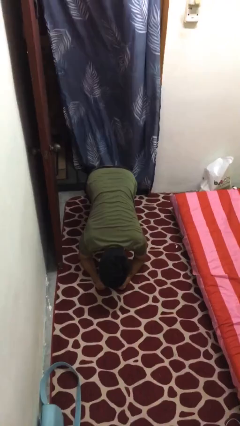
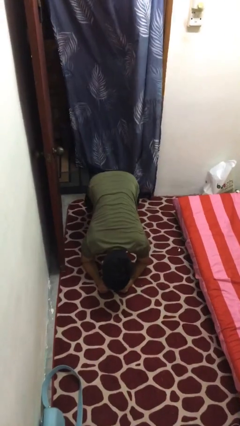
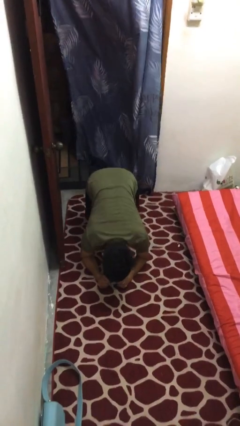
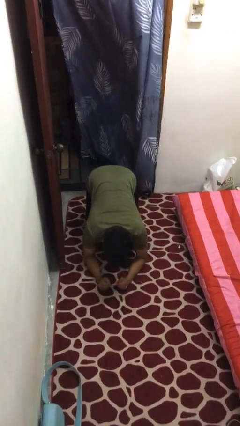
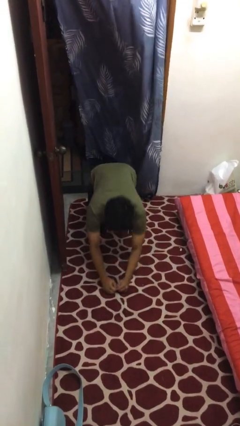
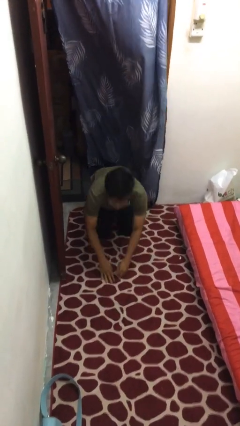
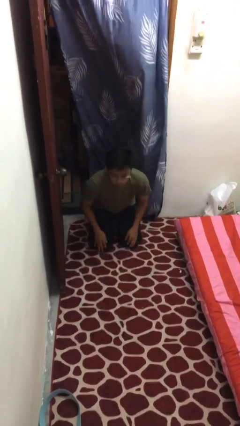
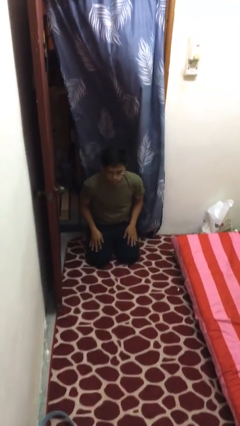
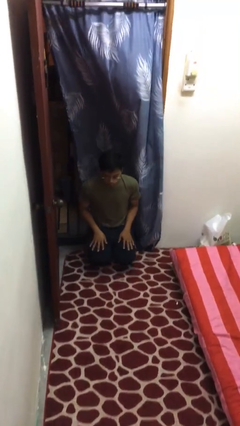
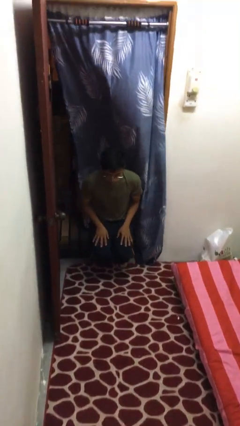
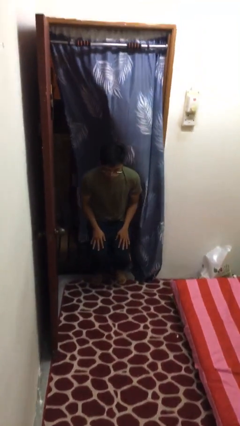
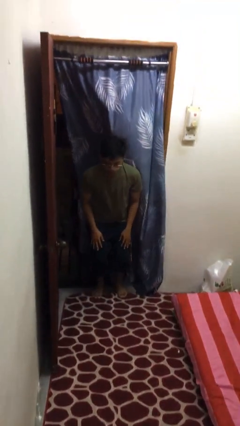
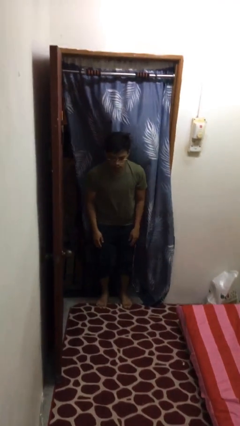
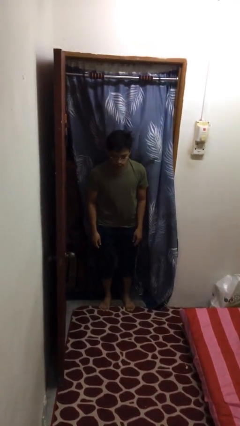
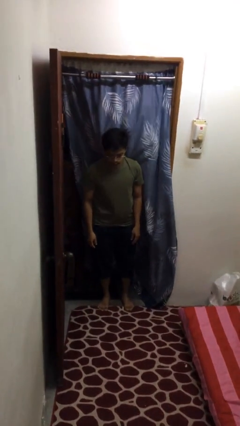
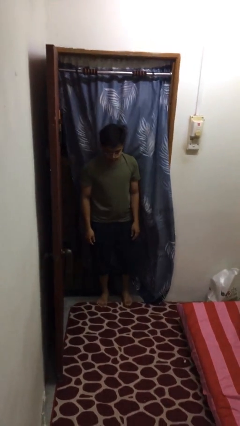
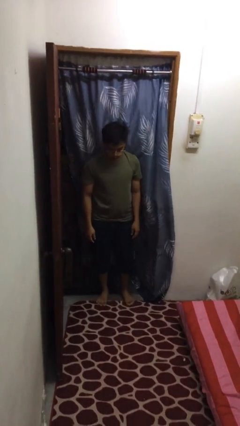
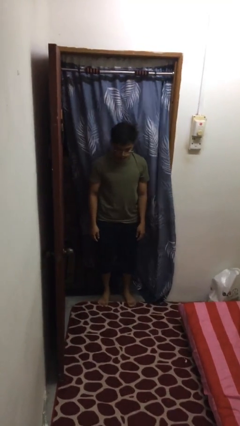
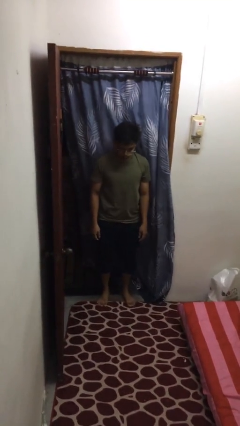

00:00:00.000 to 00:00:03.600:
person stands up from floor

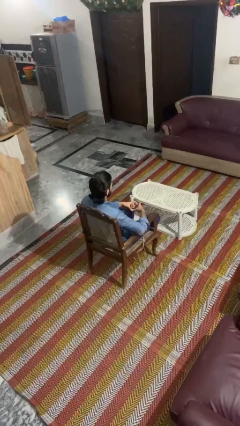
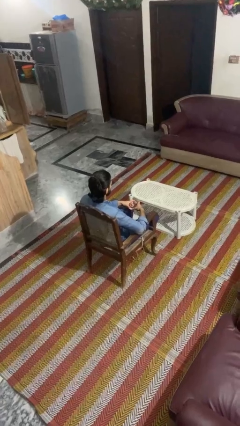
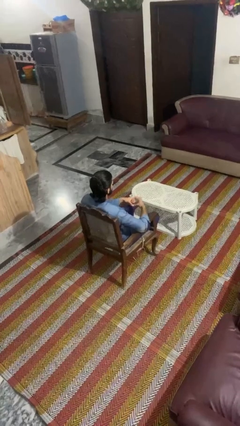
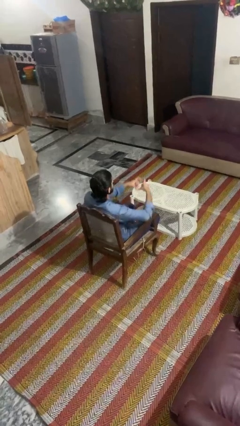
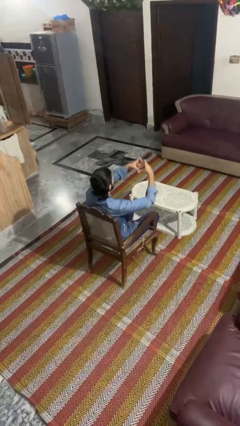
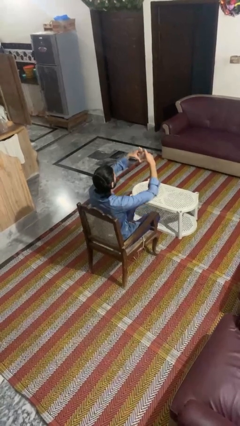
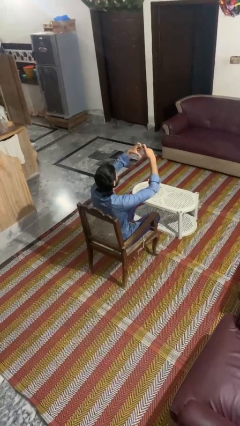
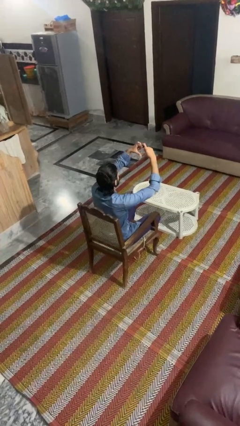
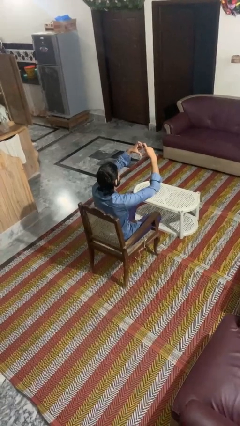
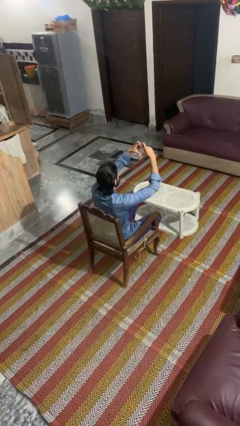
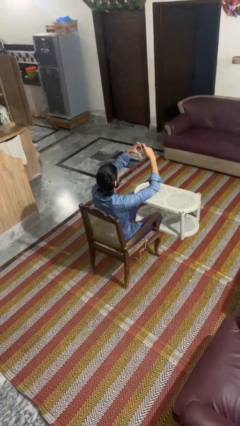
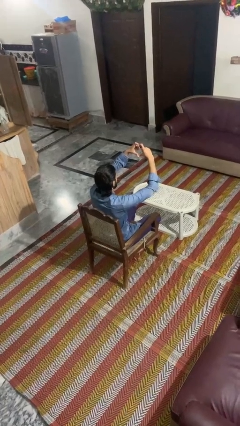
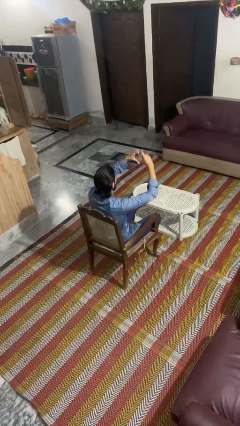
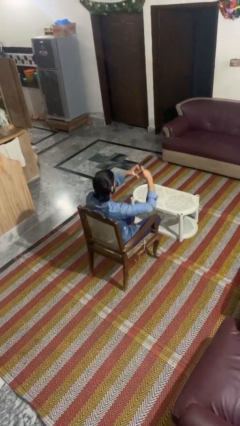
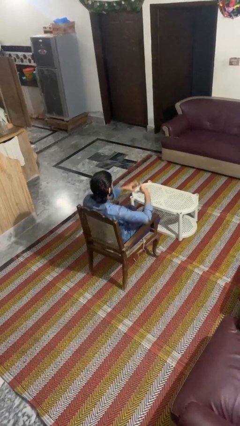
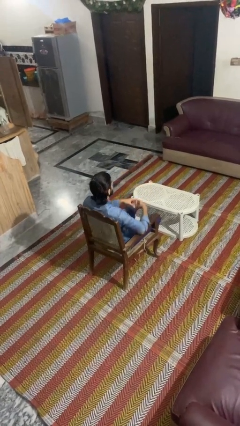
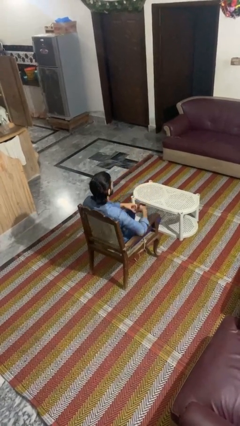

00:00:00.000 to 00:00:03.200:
person gestures heart

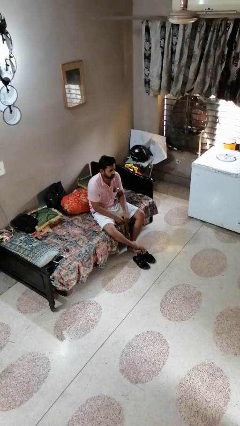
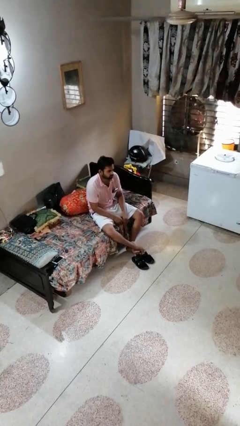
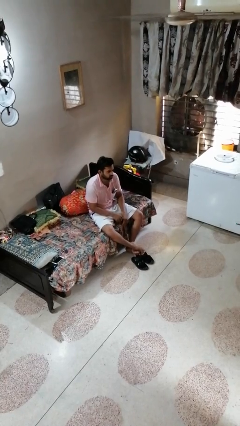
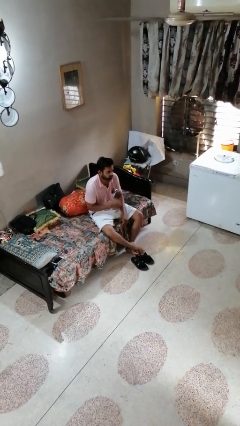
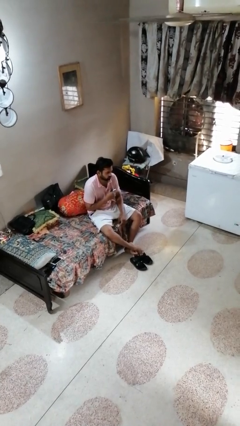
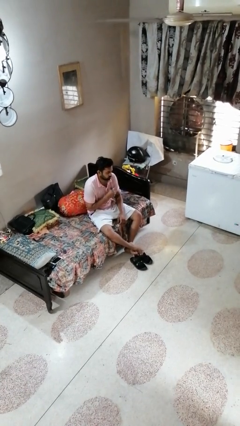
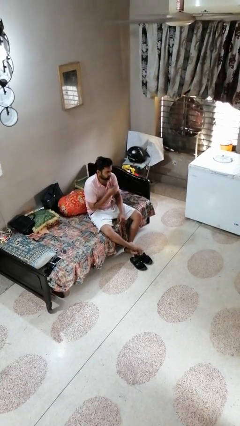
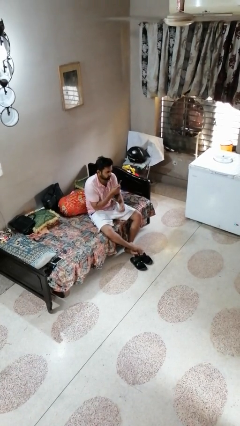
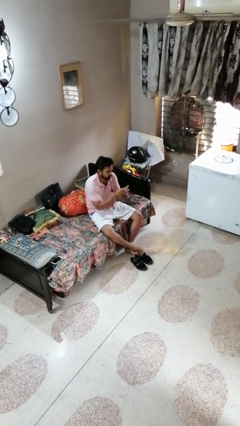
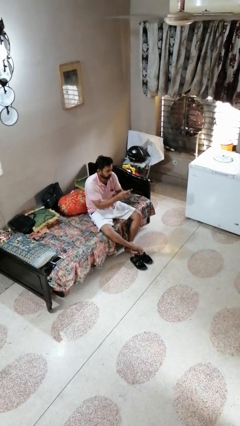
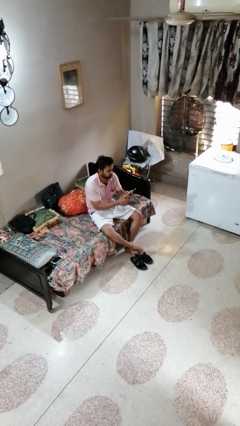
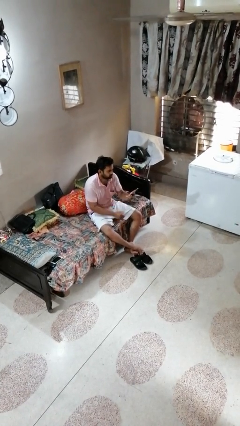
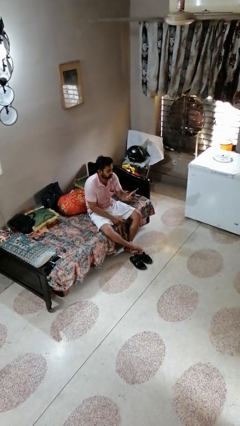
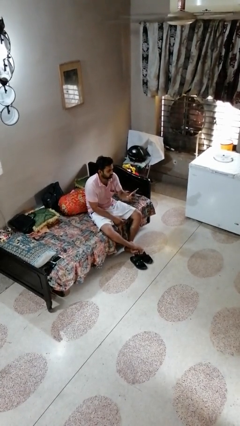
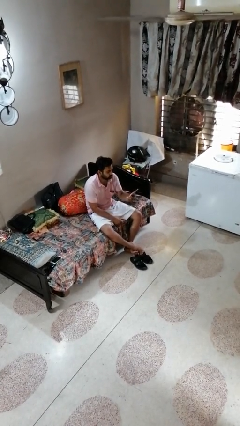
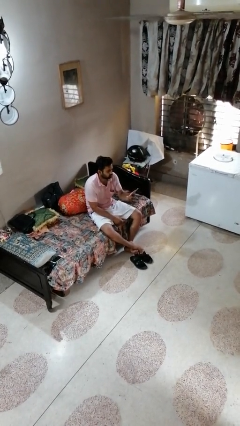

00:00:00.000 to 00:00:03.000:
person takes phone from pocket

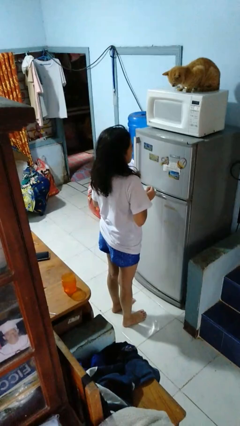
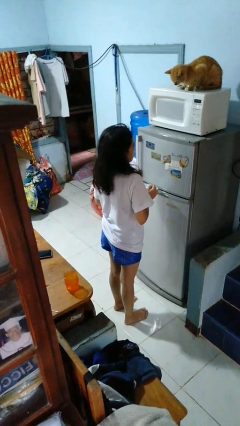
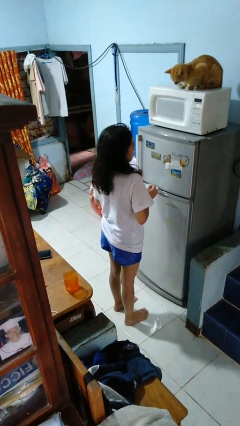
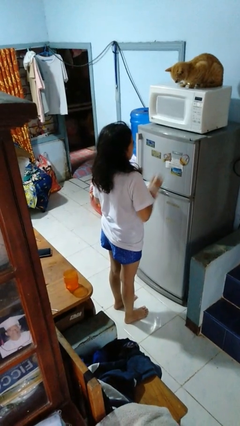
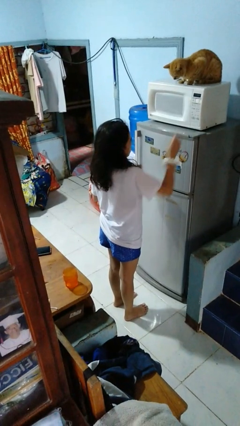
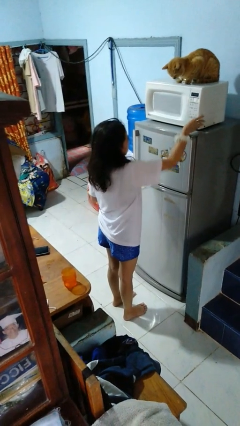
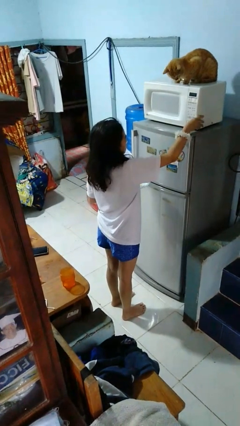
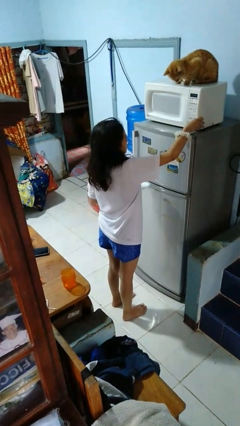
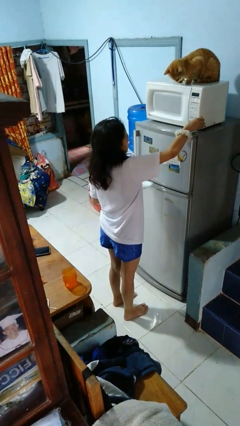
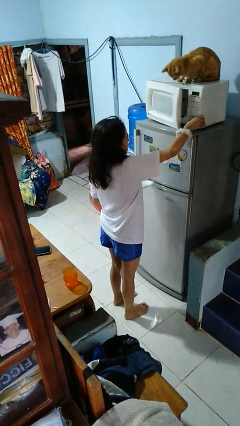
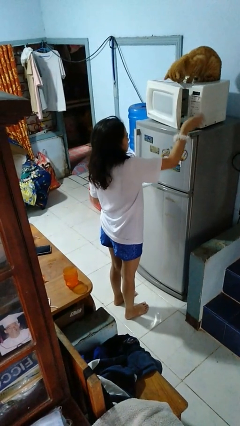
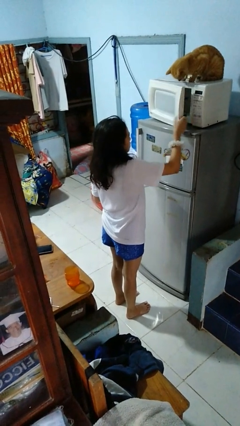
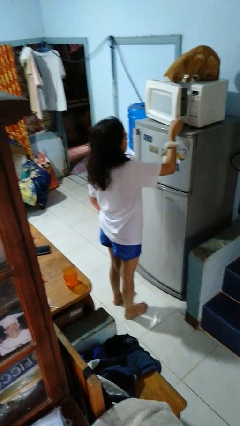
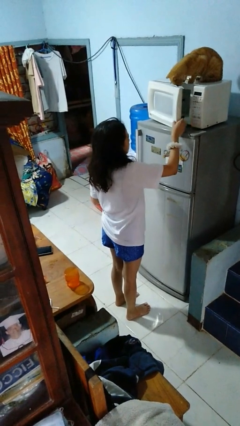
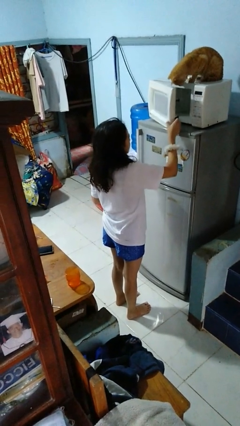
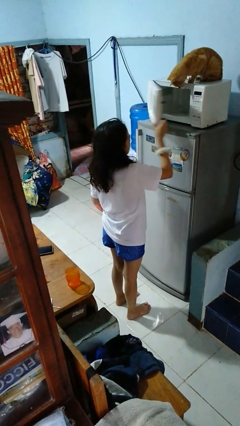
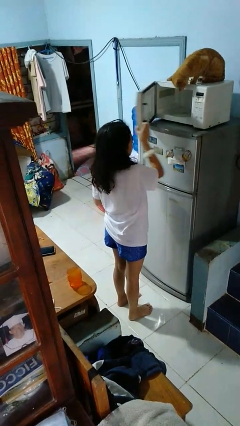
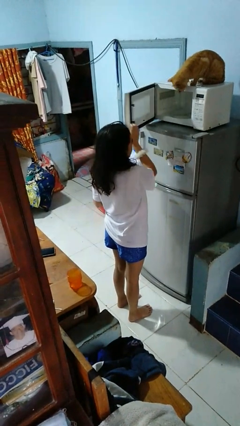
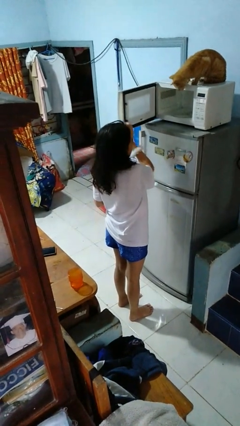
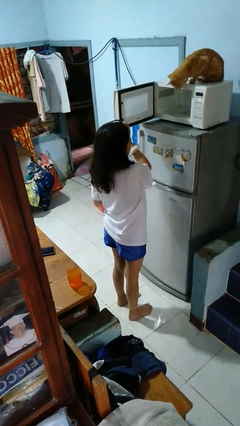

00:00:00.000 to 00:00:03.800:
person opens microwave

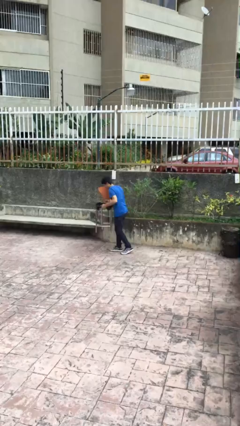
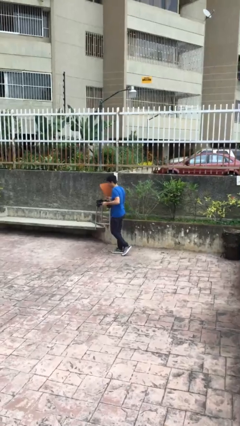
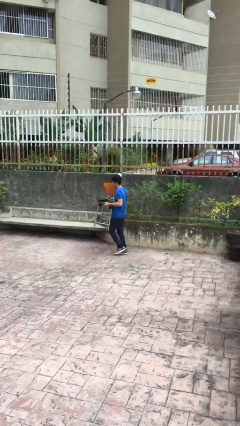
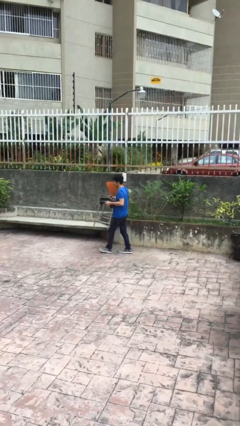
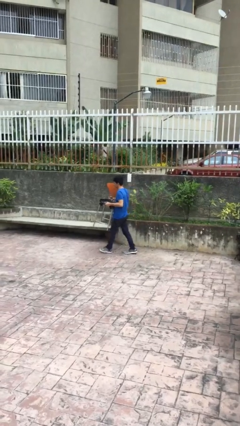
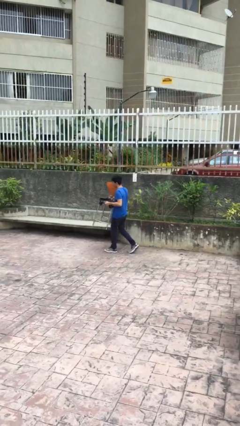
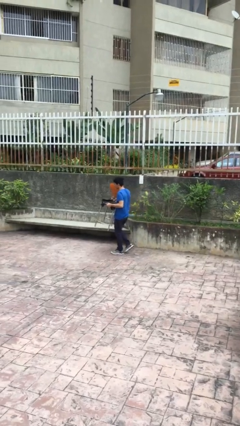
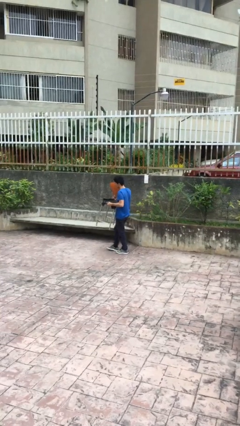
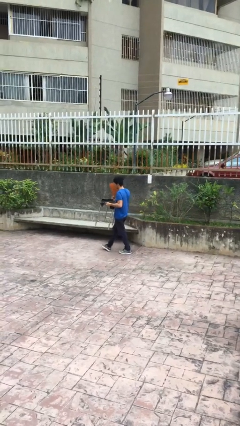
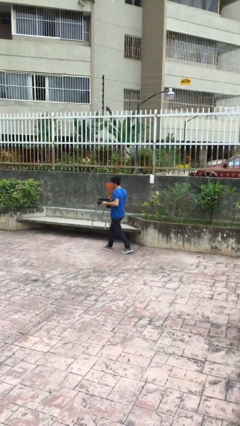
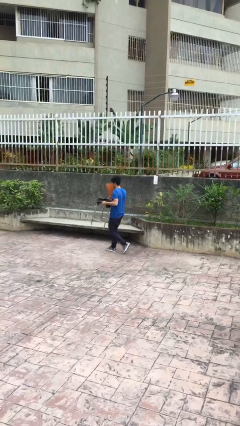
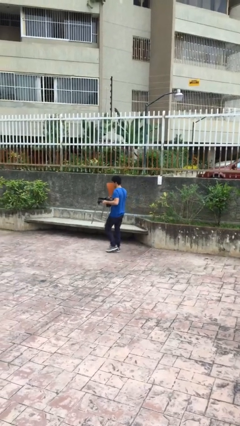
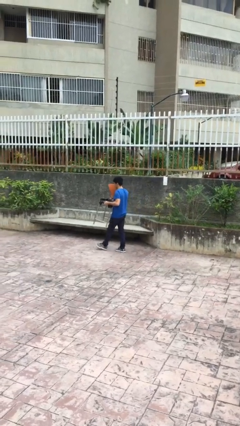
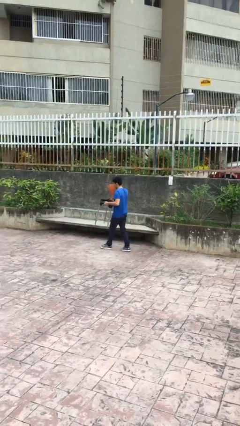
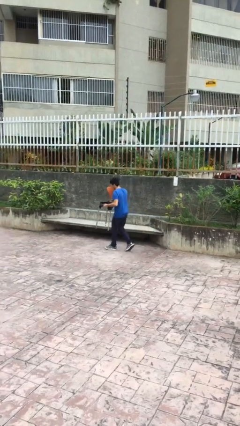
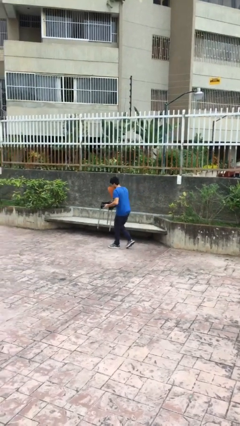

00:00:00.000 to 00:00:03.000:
person carries heavy object

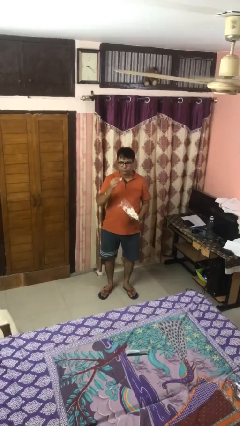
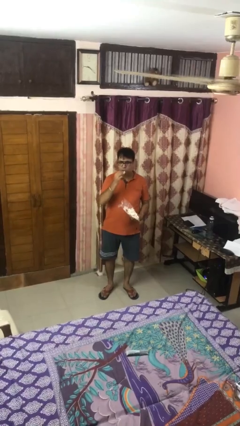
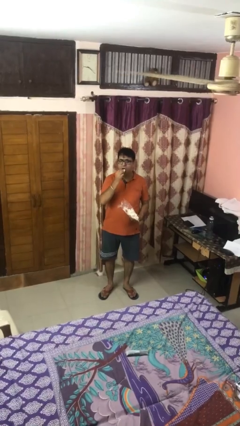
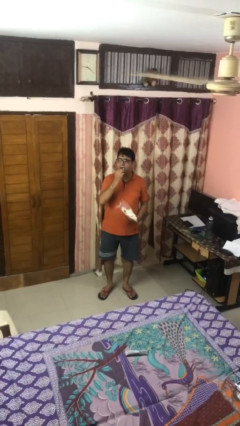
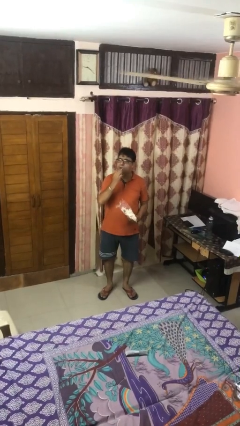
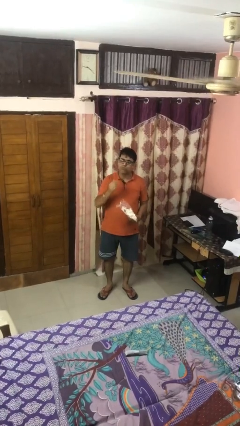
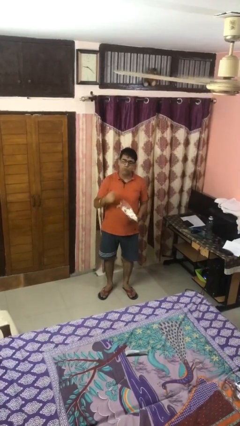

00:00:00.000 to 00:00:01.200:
person eats snack from bag

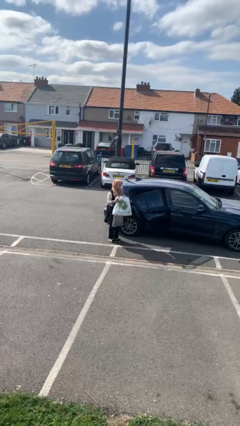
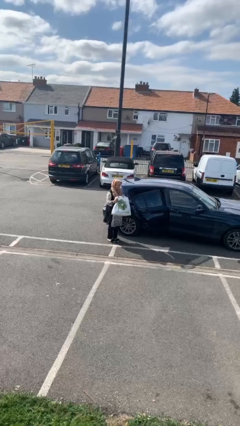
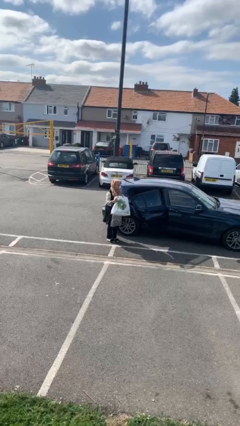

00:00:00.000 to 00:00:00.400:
person closes car door
